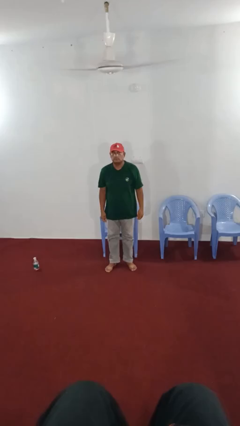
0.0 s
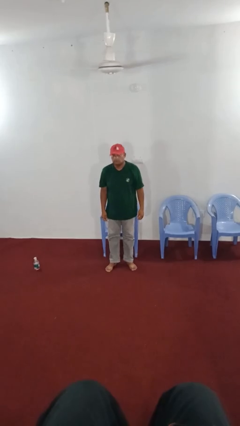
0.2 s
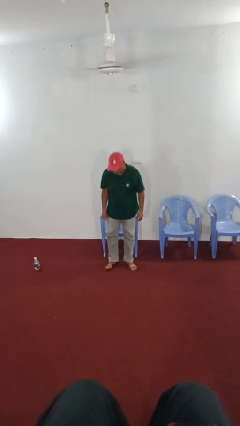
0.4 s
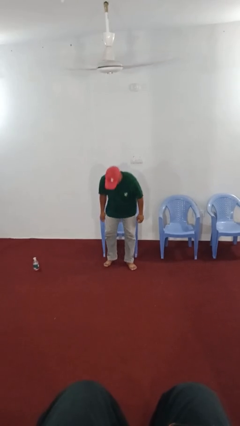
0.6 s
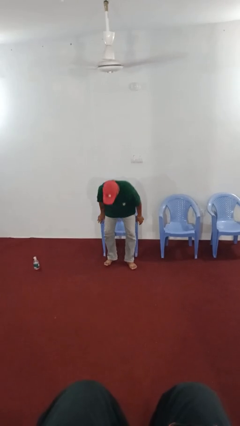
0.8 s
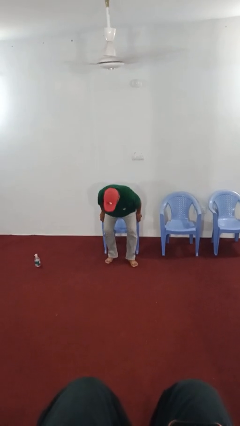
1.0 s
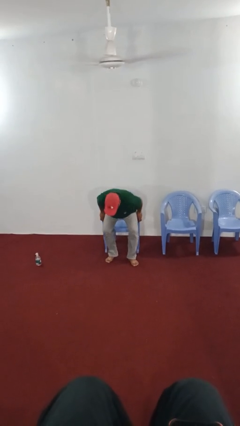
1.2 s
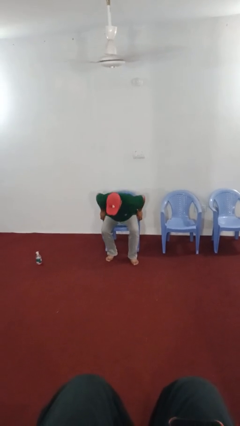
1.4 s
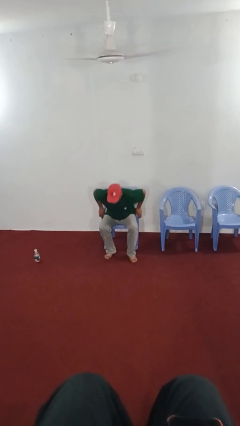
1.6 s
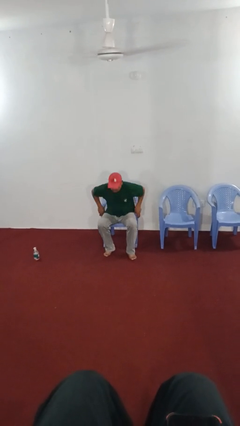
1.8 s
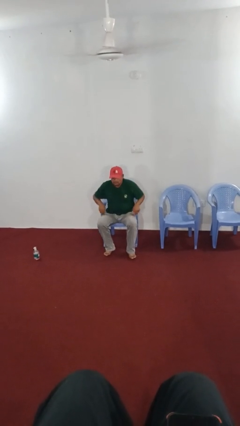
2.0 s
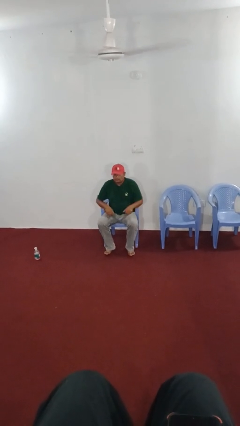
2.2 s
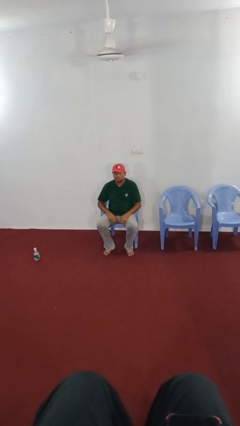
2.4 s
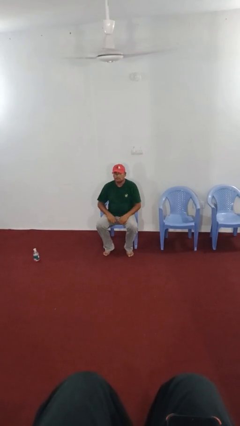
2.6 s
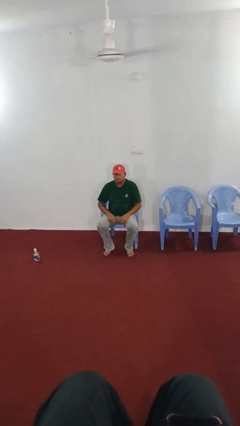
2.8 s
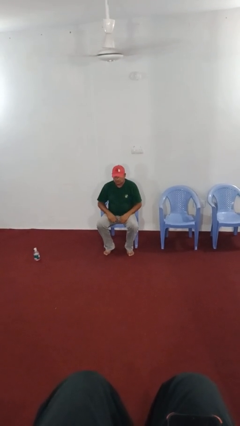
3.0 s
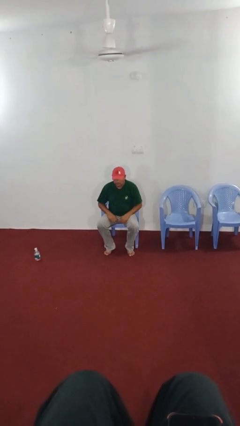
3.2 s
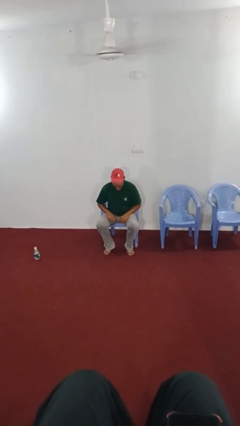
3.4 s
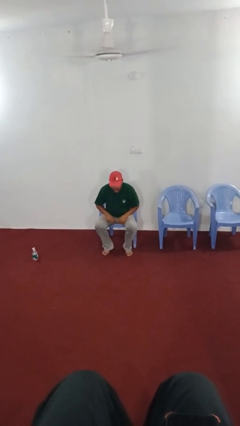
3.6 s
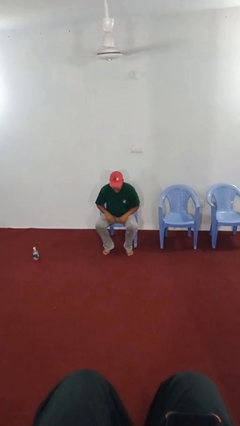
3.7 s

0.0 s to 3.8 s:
person sits down

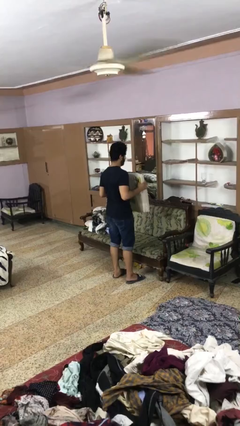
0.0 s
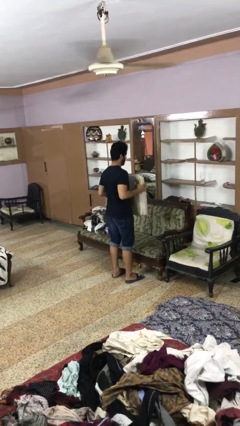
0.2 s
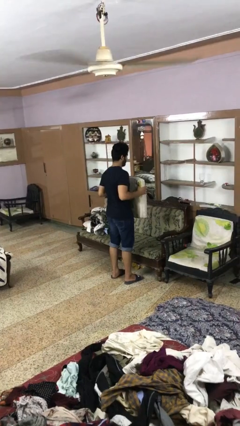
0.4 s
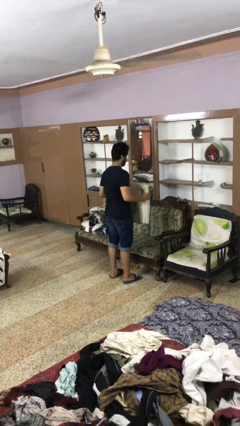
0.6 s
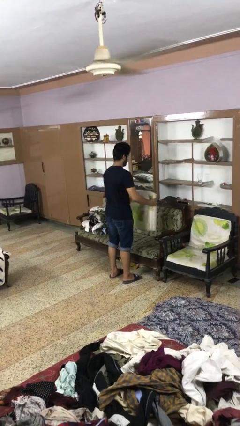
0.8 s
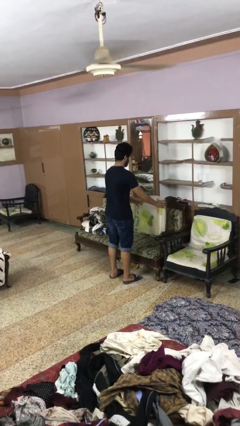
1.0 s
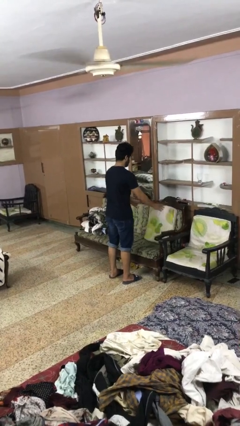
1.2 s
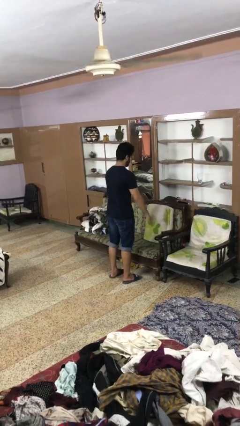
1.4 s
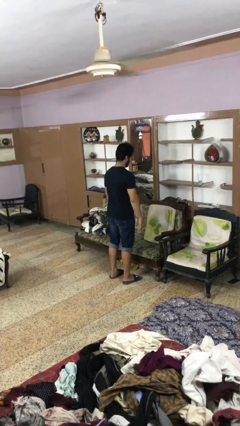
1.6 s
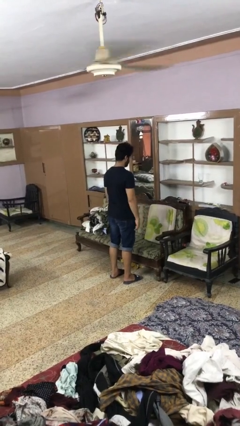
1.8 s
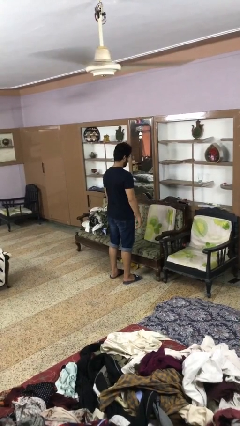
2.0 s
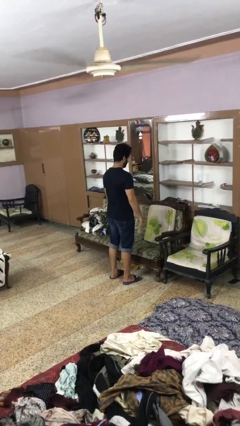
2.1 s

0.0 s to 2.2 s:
person puts down object on couch

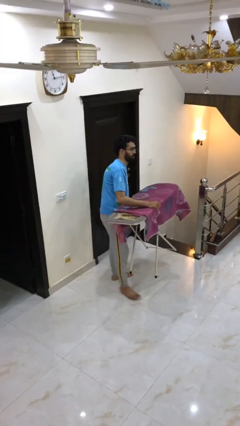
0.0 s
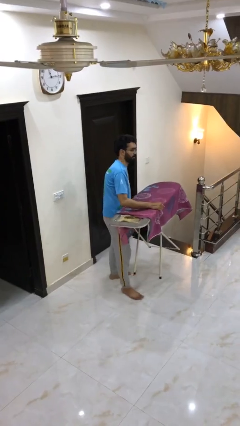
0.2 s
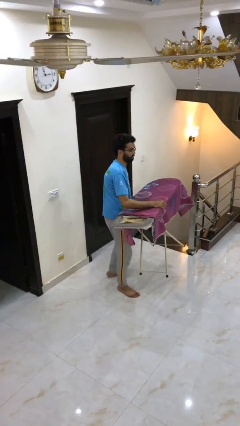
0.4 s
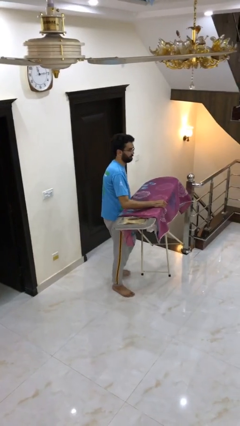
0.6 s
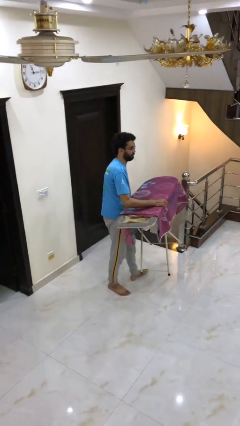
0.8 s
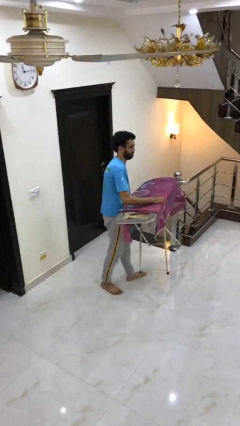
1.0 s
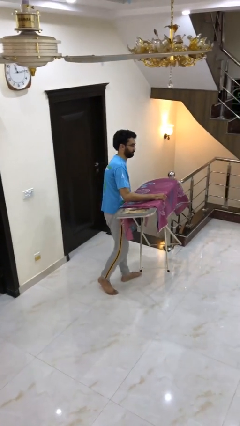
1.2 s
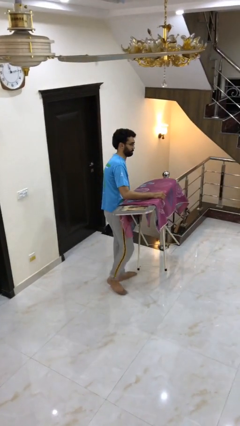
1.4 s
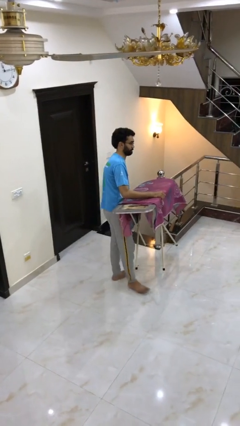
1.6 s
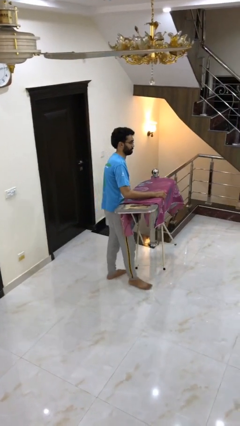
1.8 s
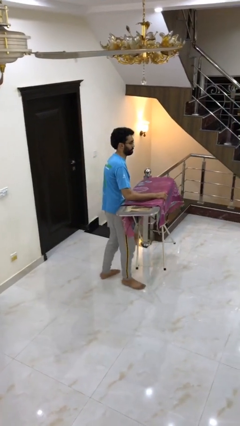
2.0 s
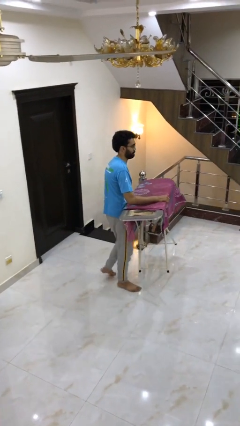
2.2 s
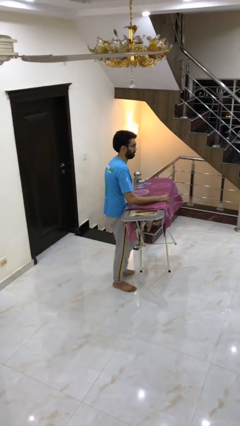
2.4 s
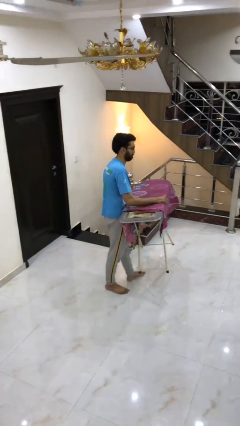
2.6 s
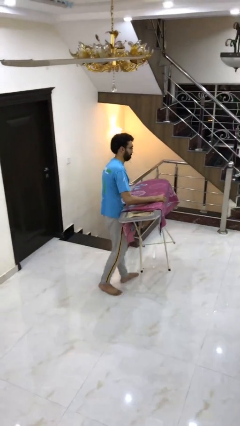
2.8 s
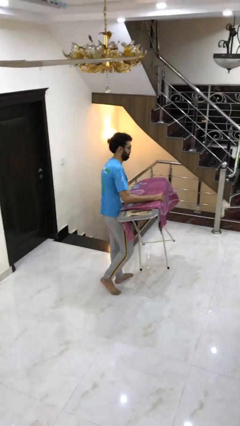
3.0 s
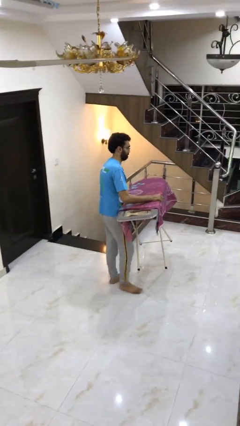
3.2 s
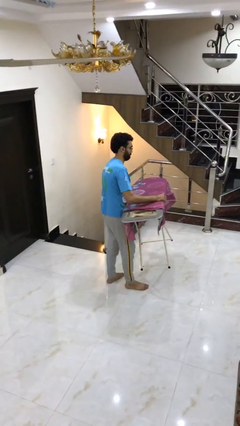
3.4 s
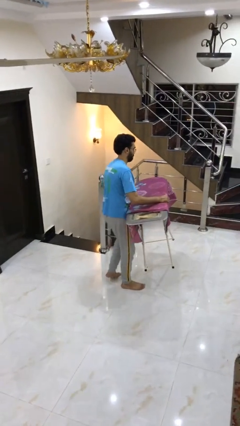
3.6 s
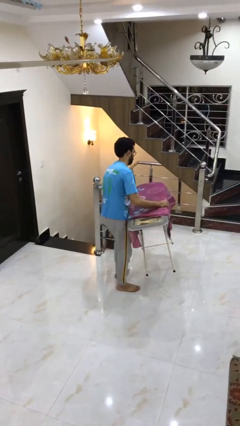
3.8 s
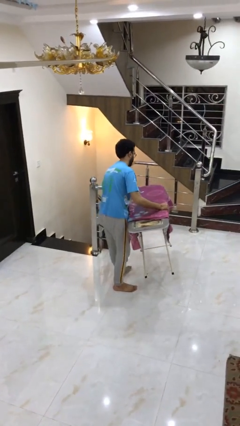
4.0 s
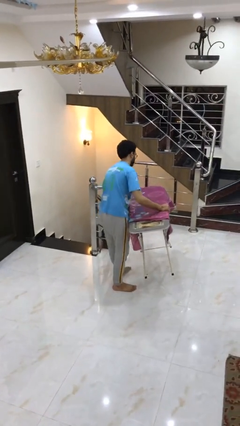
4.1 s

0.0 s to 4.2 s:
person carries heavy object

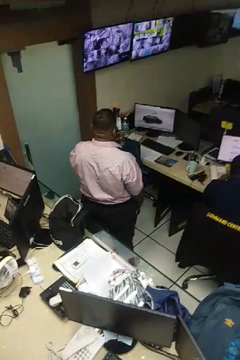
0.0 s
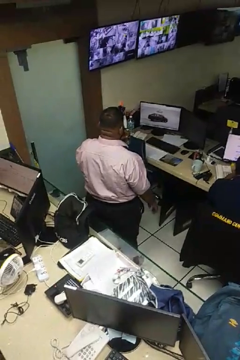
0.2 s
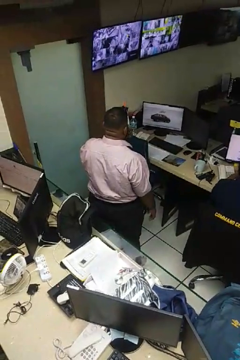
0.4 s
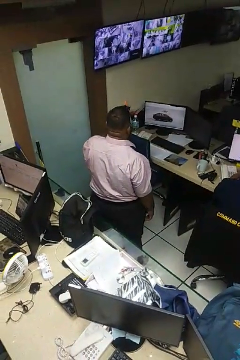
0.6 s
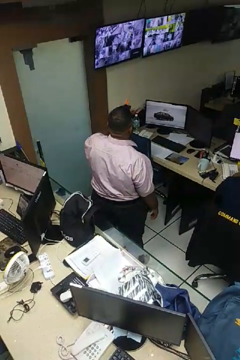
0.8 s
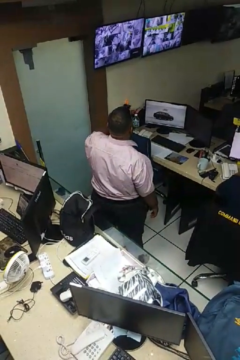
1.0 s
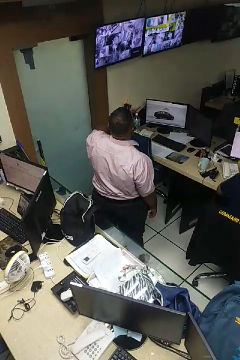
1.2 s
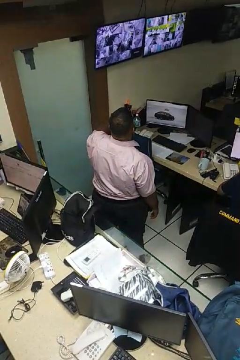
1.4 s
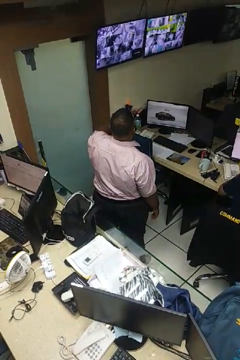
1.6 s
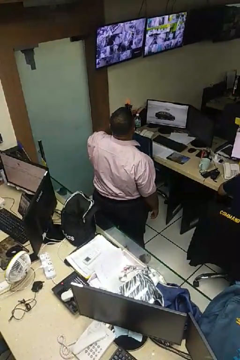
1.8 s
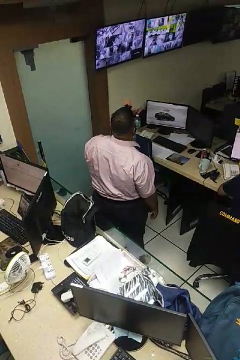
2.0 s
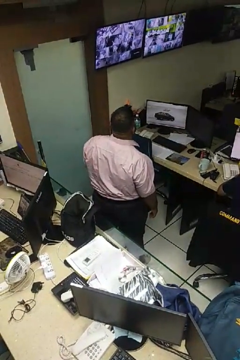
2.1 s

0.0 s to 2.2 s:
person drinks from beverage can

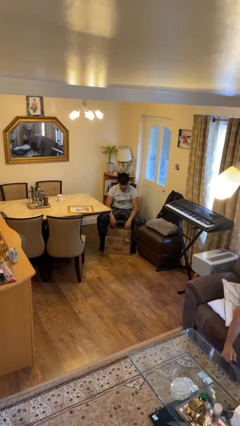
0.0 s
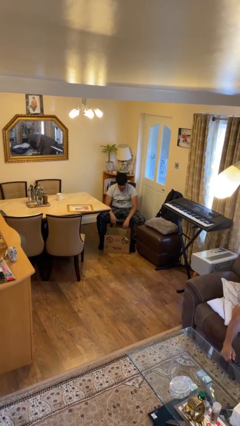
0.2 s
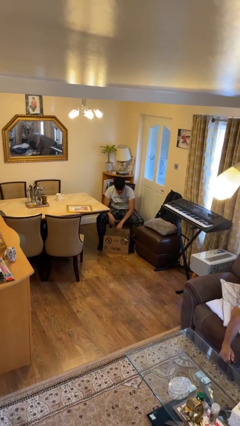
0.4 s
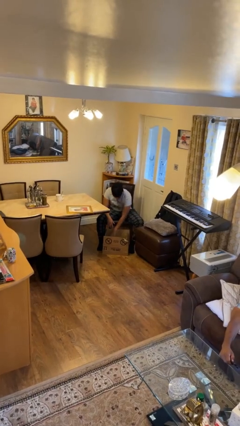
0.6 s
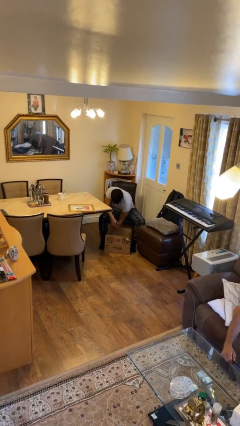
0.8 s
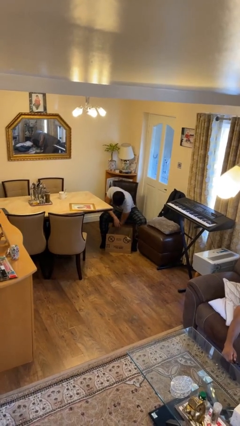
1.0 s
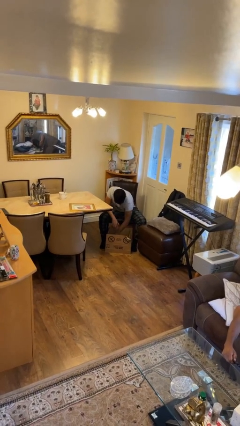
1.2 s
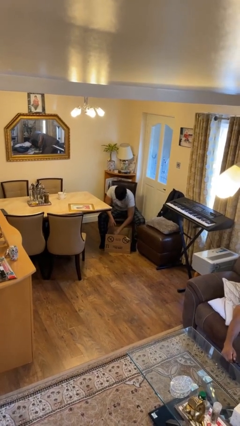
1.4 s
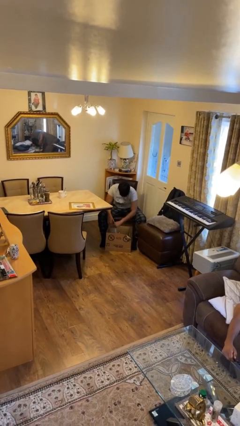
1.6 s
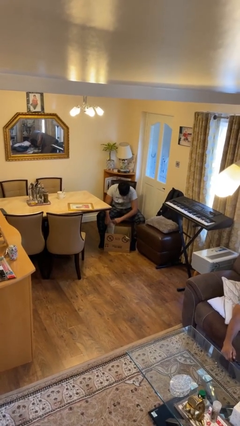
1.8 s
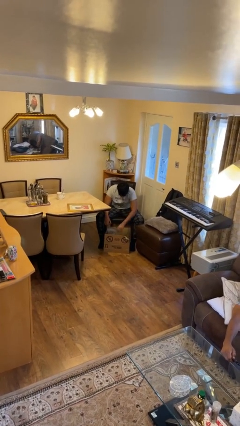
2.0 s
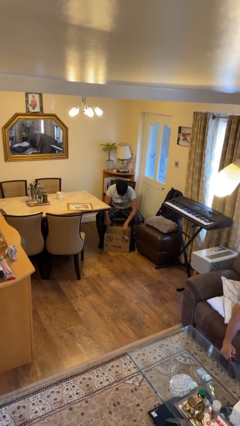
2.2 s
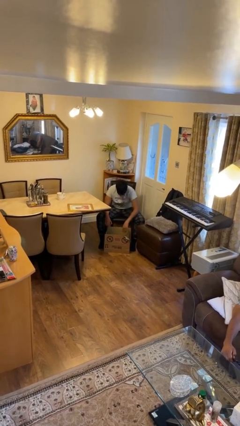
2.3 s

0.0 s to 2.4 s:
person searches in box

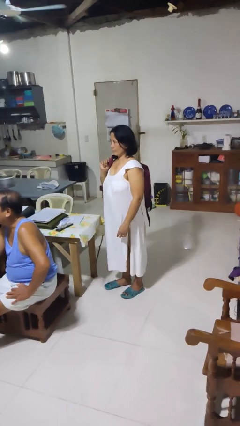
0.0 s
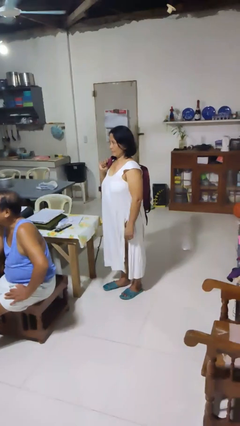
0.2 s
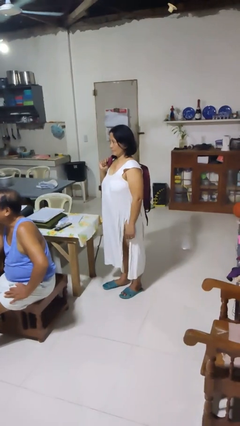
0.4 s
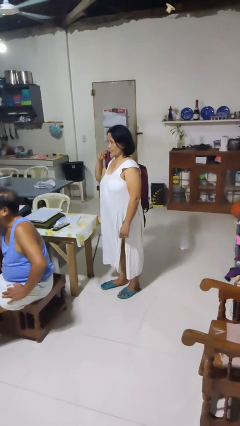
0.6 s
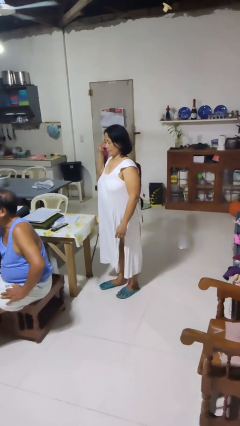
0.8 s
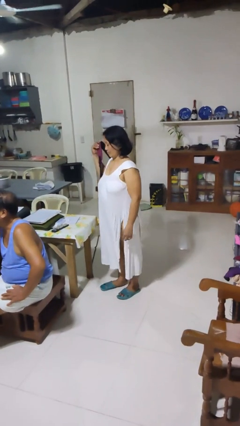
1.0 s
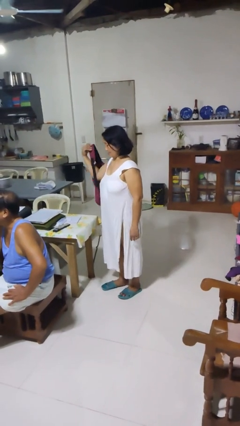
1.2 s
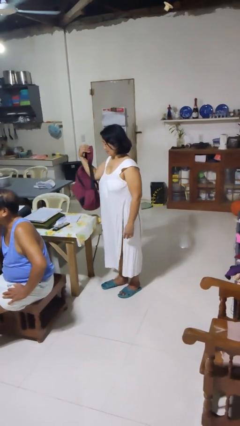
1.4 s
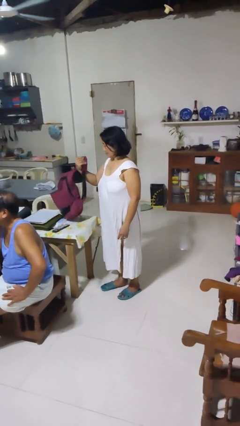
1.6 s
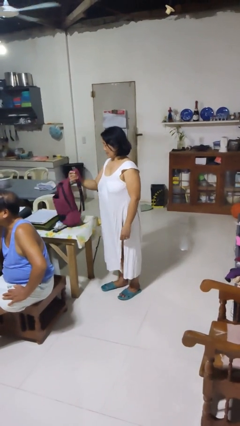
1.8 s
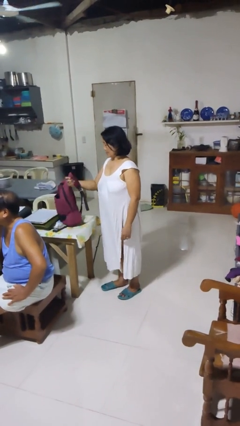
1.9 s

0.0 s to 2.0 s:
person takes off backpack

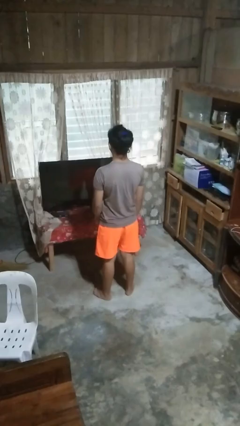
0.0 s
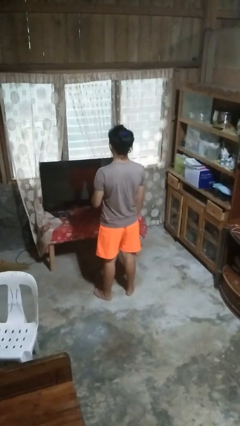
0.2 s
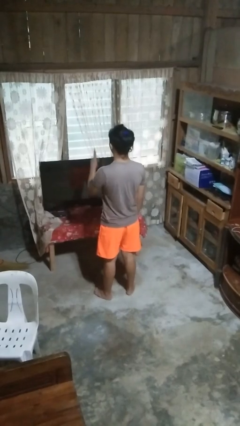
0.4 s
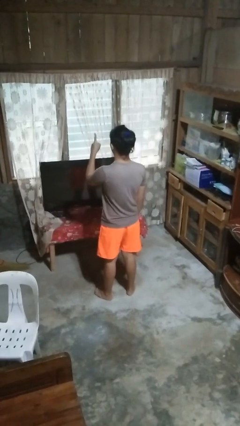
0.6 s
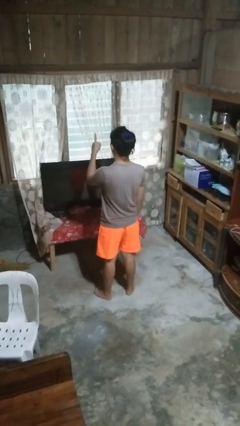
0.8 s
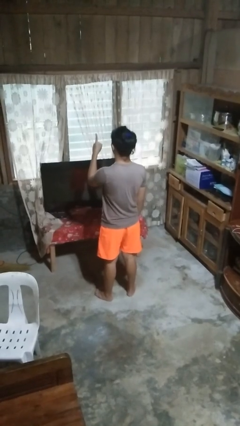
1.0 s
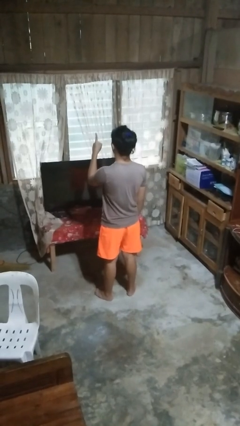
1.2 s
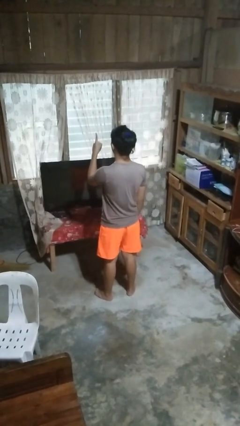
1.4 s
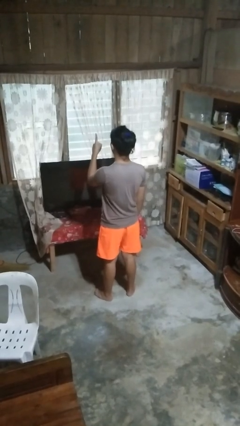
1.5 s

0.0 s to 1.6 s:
person gestures number one
